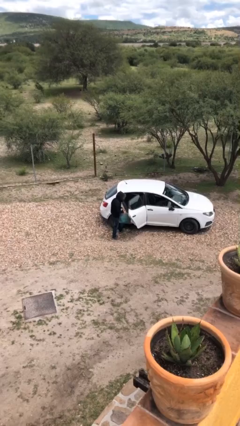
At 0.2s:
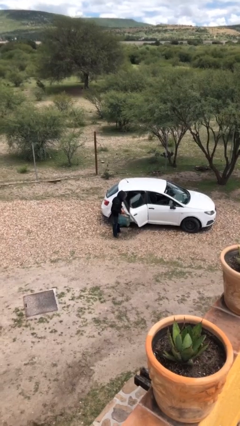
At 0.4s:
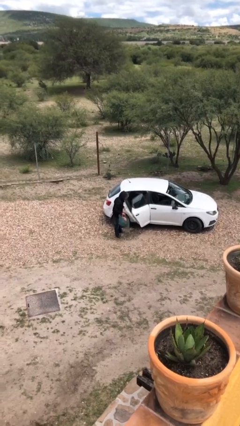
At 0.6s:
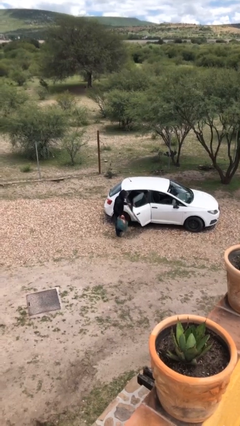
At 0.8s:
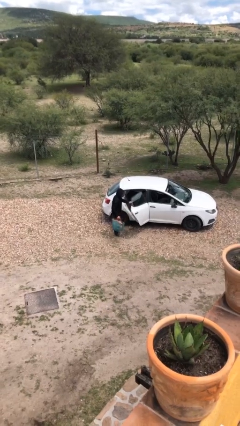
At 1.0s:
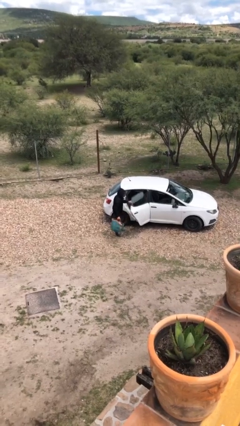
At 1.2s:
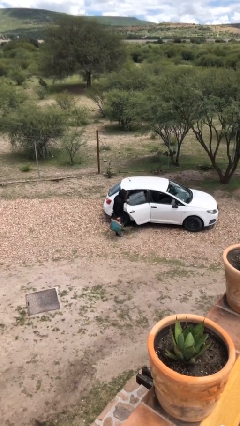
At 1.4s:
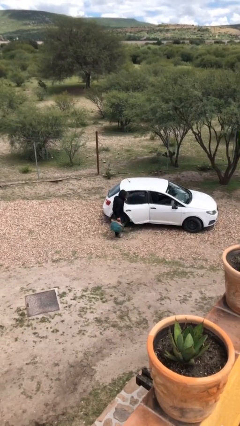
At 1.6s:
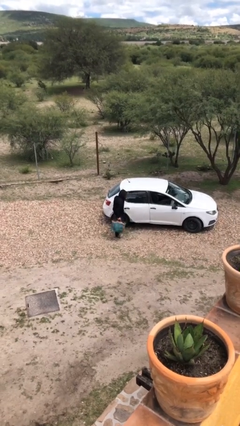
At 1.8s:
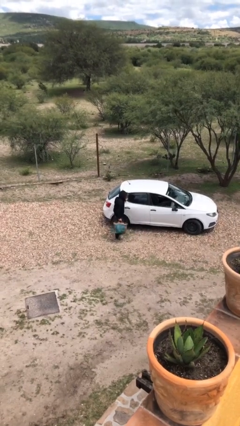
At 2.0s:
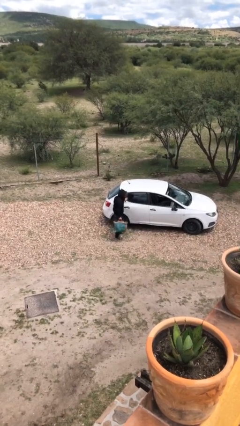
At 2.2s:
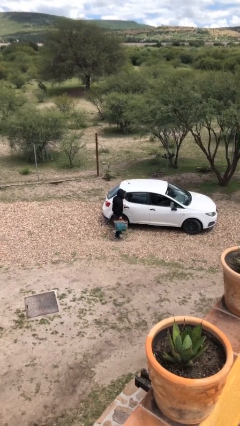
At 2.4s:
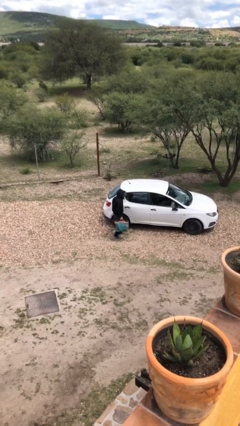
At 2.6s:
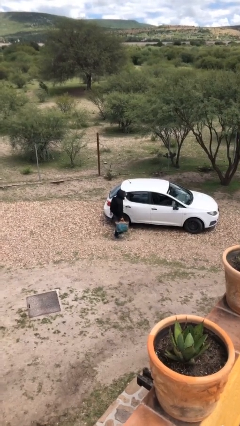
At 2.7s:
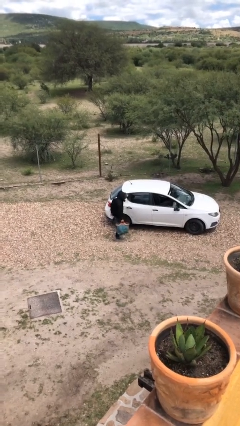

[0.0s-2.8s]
person closes car door

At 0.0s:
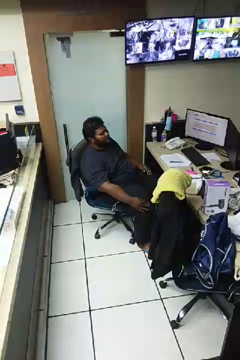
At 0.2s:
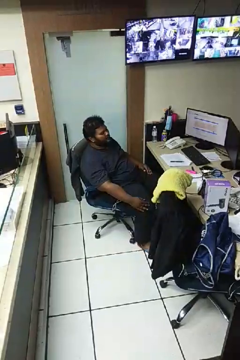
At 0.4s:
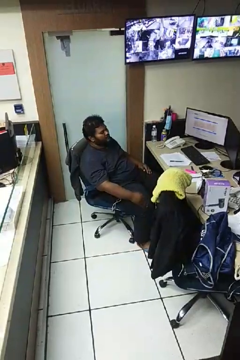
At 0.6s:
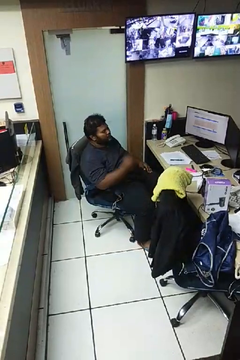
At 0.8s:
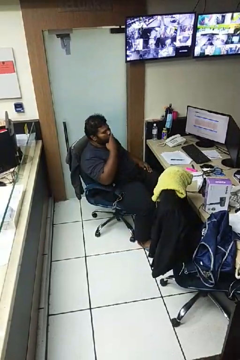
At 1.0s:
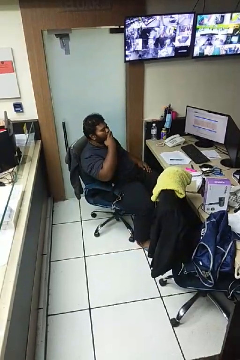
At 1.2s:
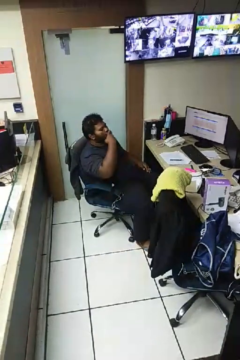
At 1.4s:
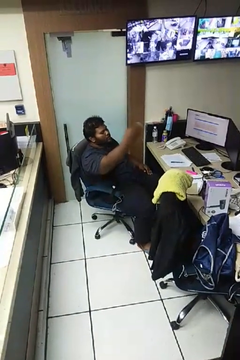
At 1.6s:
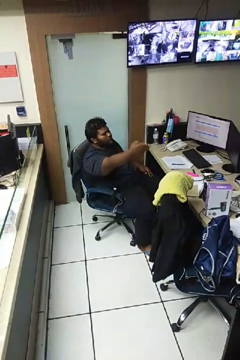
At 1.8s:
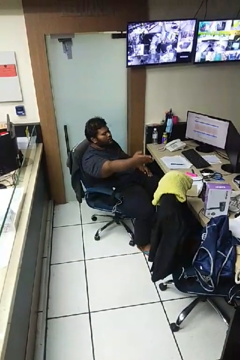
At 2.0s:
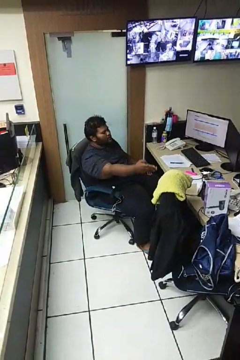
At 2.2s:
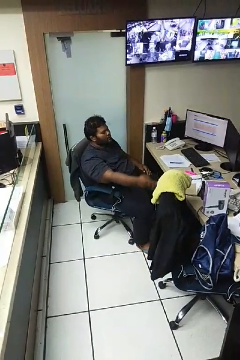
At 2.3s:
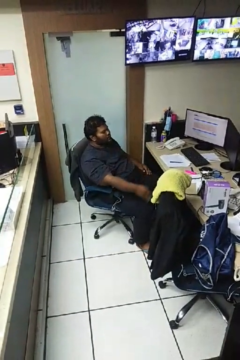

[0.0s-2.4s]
person gestures blow kiss

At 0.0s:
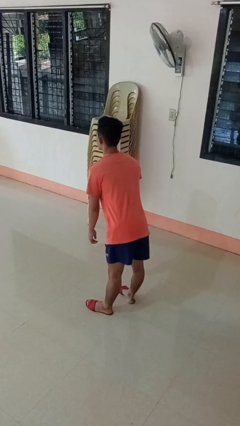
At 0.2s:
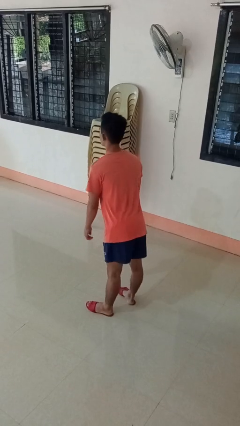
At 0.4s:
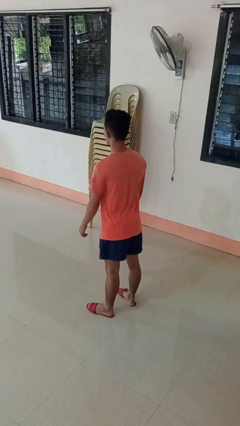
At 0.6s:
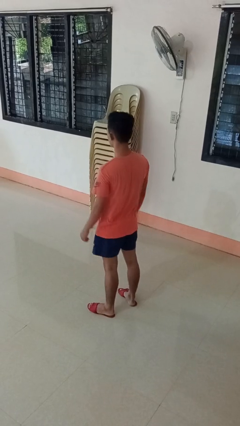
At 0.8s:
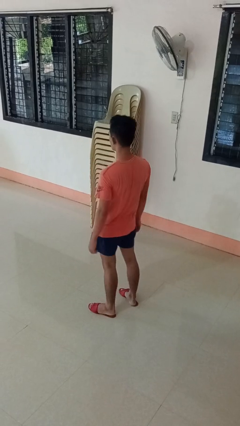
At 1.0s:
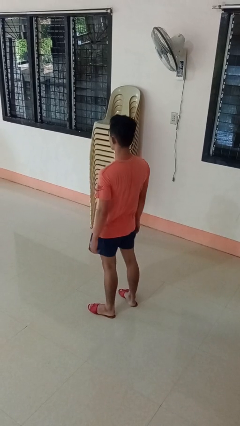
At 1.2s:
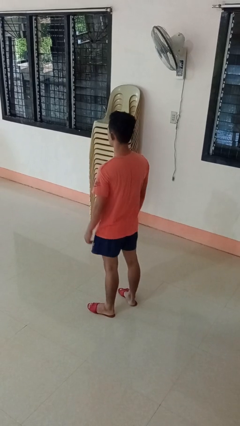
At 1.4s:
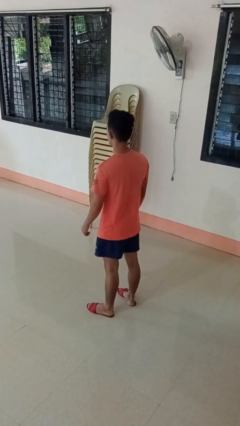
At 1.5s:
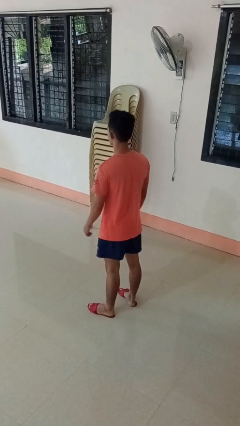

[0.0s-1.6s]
person wiggles hips

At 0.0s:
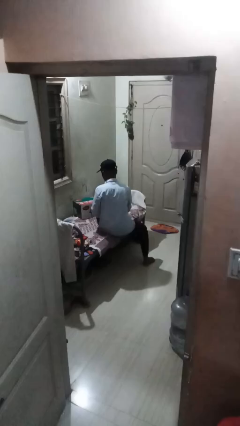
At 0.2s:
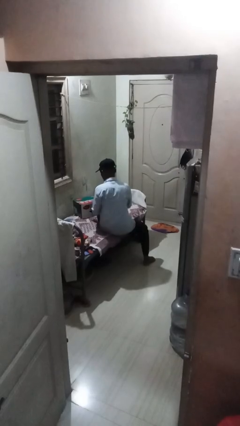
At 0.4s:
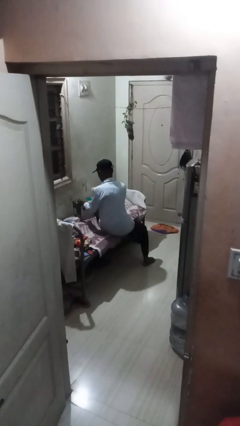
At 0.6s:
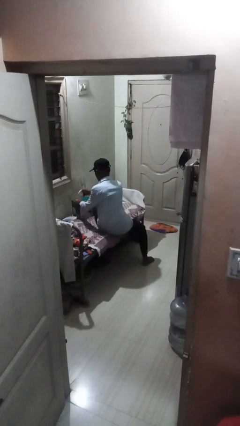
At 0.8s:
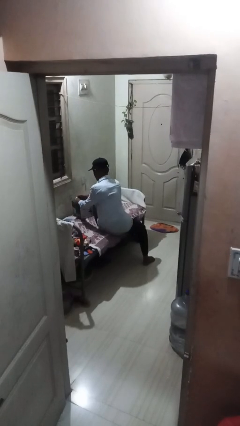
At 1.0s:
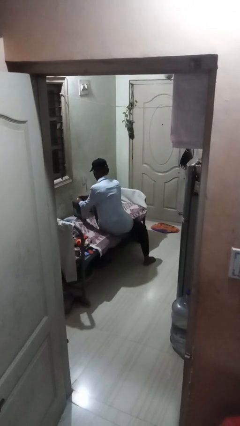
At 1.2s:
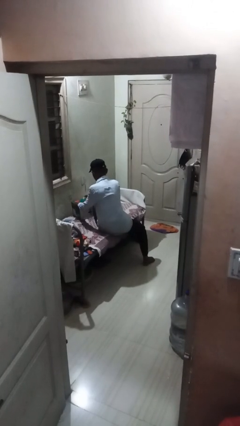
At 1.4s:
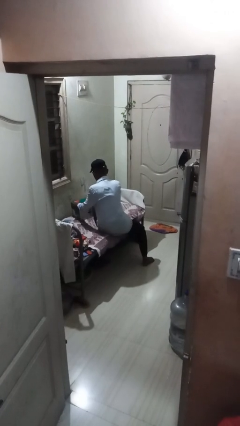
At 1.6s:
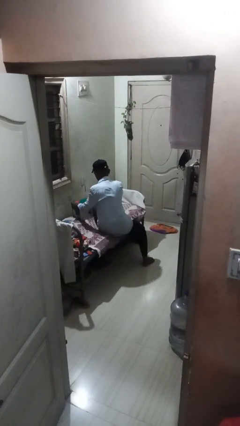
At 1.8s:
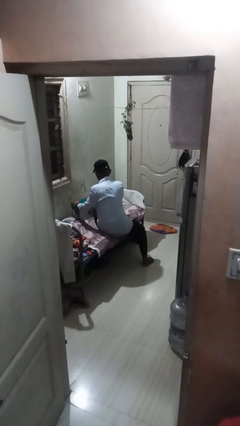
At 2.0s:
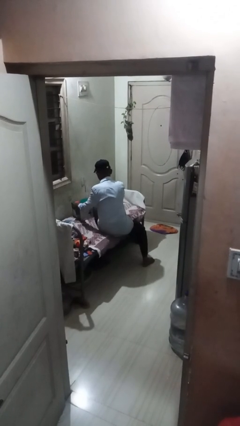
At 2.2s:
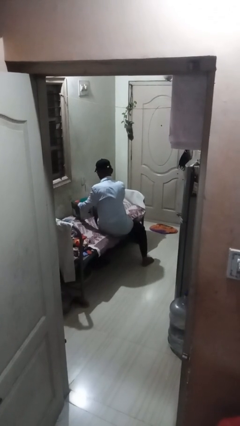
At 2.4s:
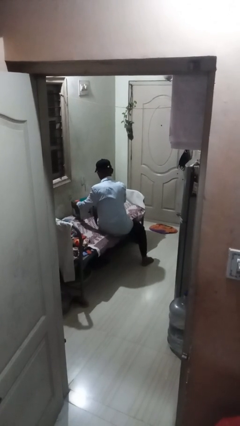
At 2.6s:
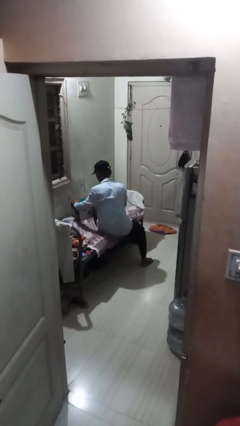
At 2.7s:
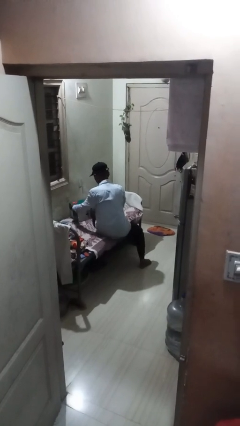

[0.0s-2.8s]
person wraps box

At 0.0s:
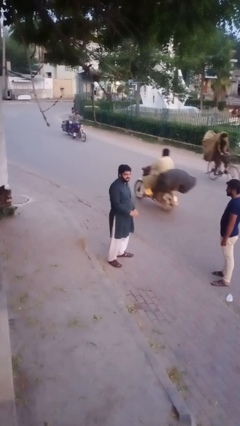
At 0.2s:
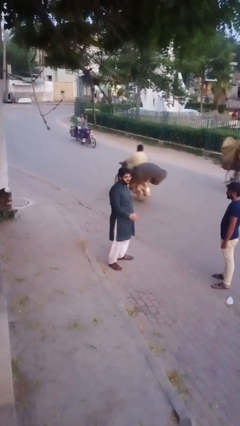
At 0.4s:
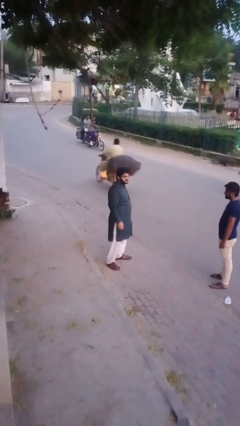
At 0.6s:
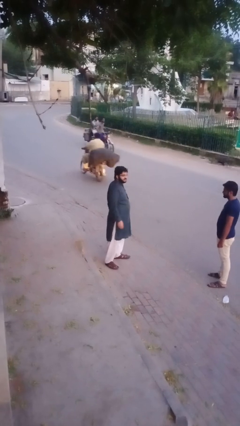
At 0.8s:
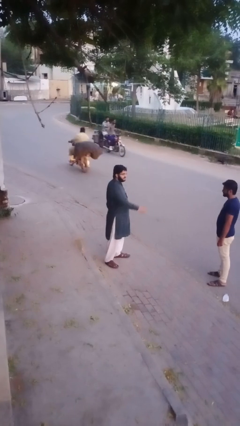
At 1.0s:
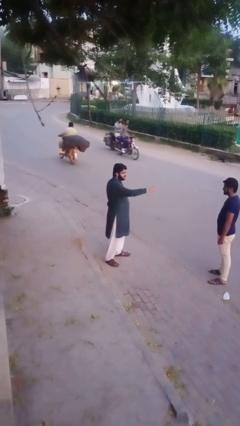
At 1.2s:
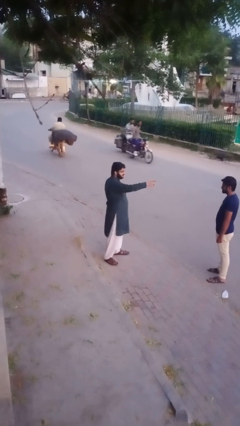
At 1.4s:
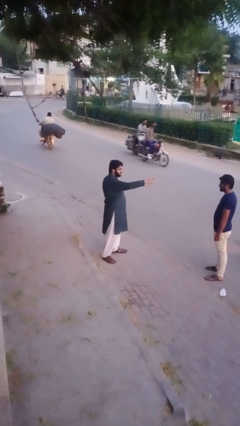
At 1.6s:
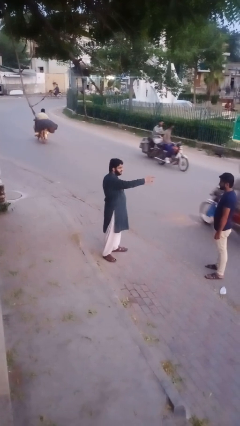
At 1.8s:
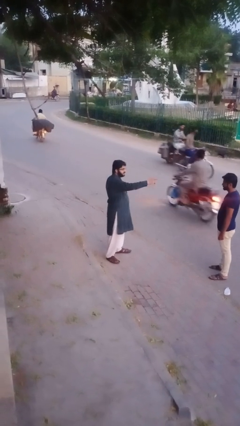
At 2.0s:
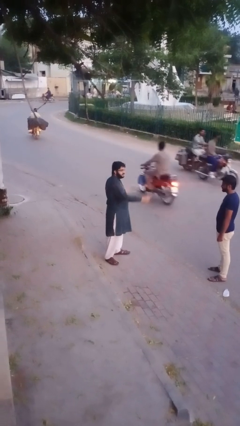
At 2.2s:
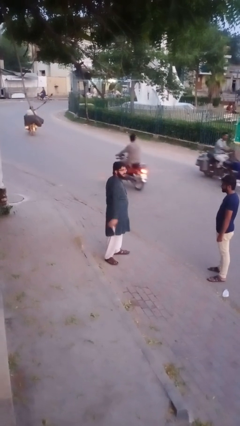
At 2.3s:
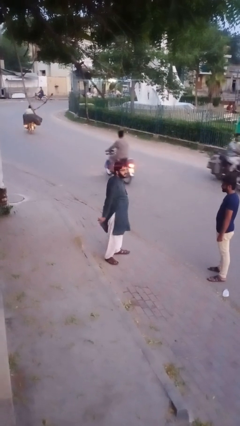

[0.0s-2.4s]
person points at person

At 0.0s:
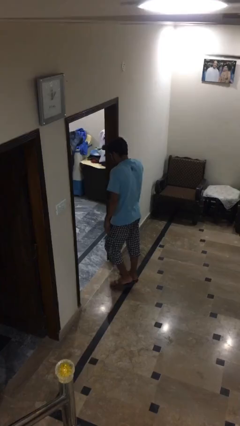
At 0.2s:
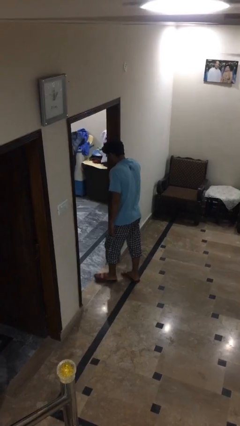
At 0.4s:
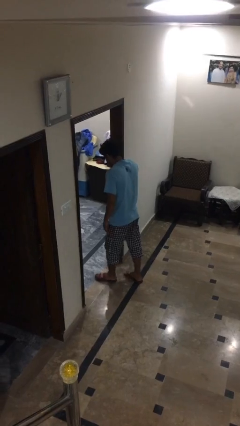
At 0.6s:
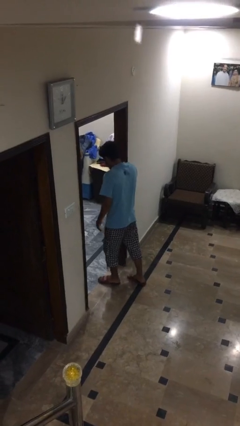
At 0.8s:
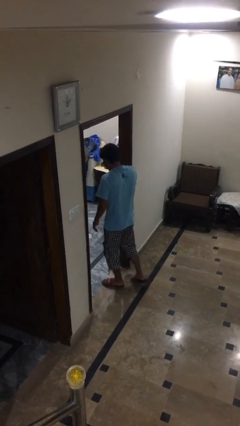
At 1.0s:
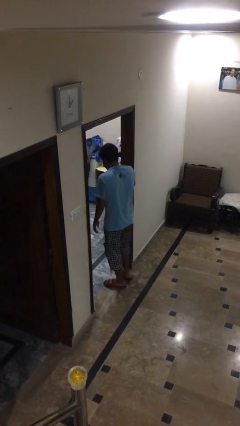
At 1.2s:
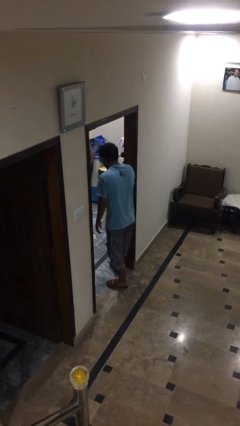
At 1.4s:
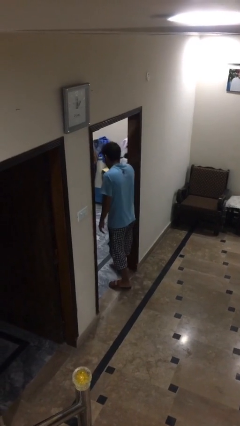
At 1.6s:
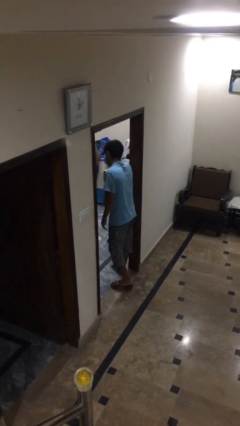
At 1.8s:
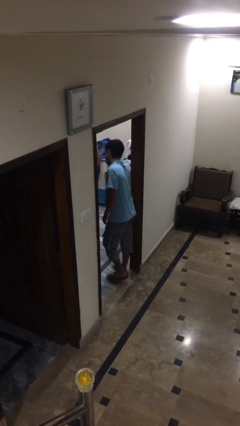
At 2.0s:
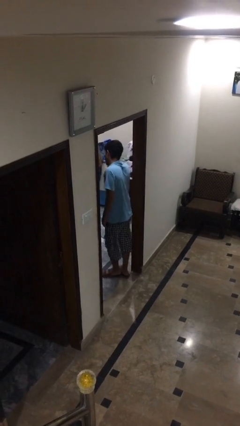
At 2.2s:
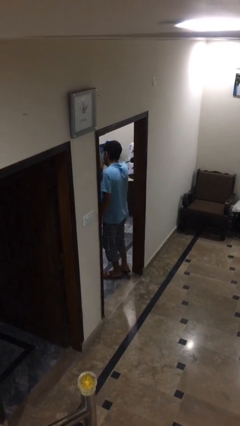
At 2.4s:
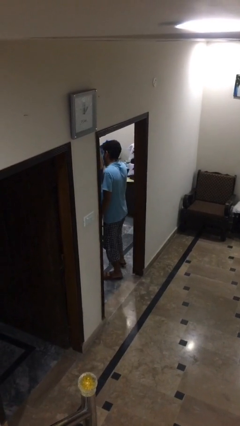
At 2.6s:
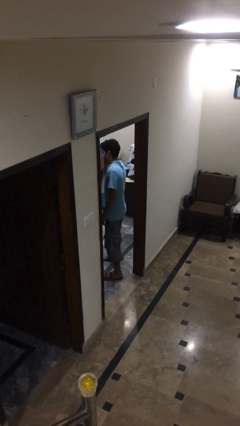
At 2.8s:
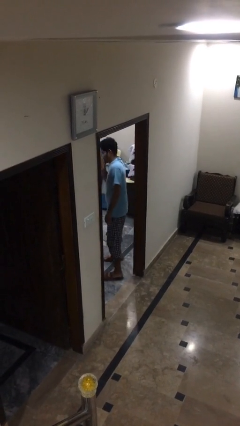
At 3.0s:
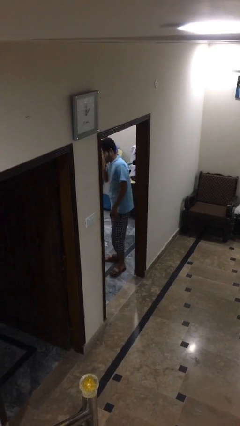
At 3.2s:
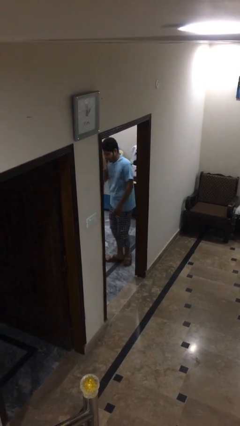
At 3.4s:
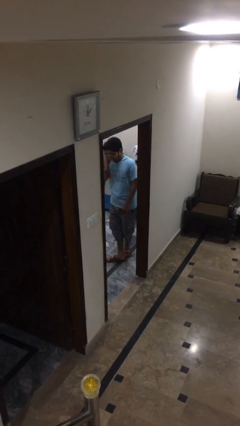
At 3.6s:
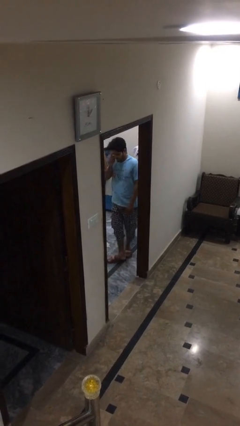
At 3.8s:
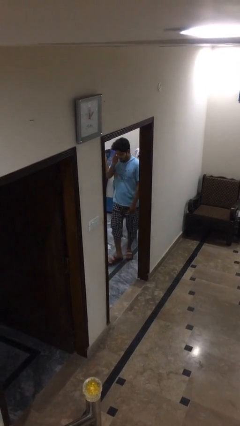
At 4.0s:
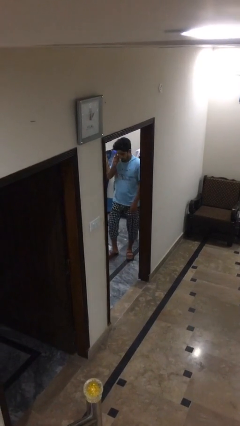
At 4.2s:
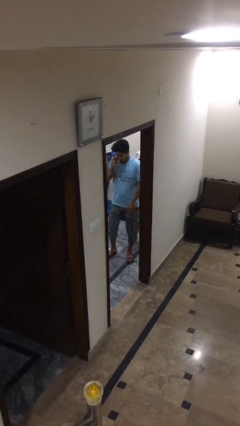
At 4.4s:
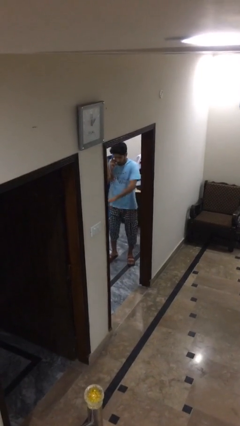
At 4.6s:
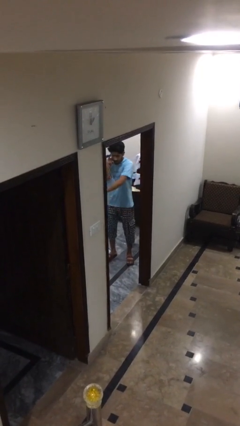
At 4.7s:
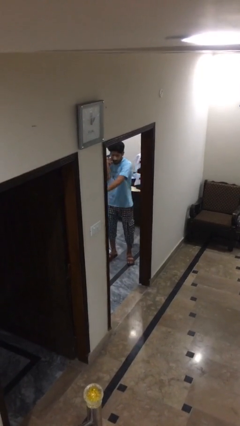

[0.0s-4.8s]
person exits scene through structure

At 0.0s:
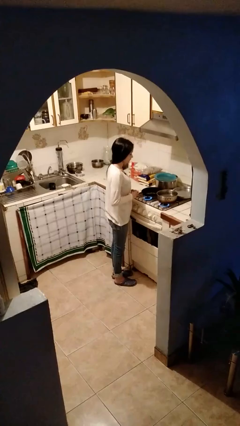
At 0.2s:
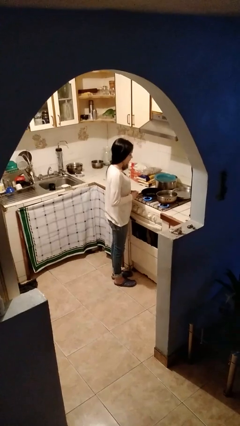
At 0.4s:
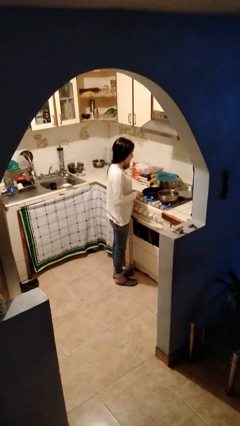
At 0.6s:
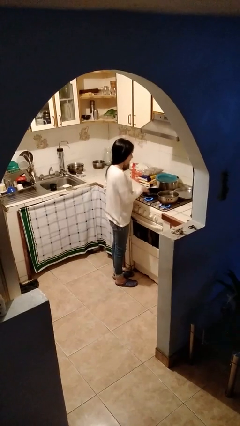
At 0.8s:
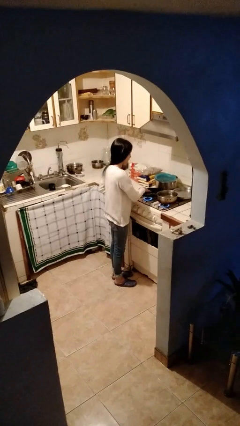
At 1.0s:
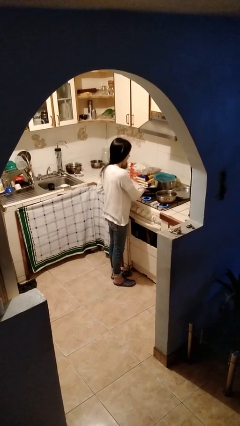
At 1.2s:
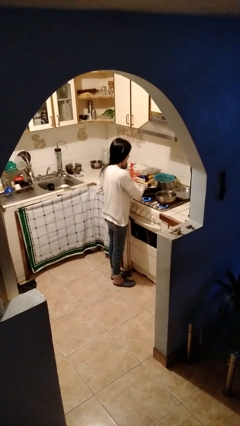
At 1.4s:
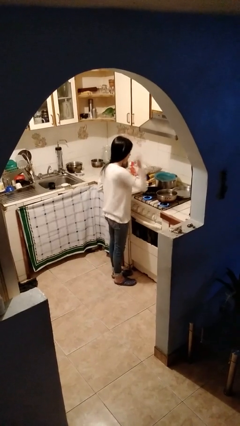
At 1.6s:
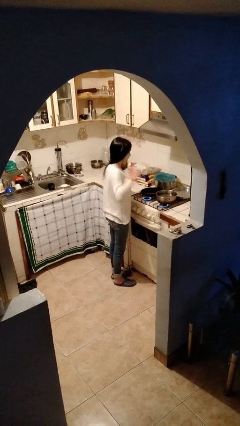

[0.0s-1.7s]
person burns hand
